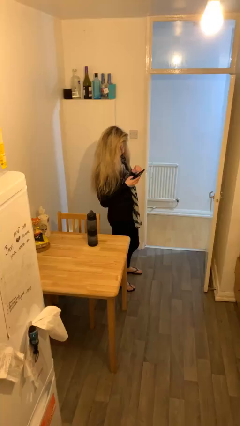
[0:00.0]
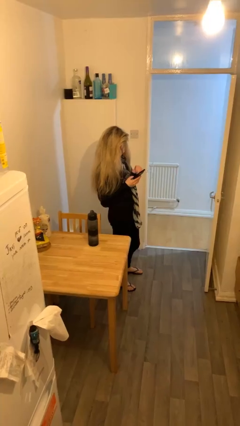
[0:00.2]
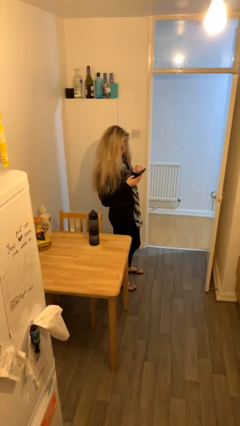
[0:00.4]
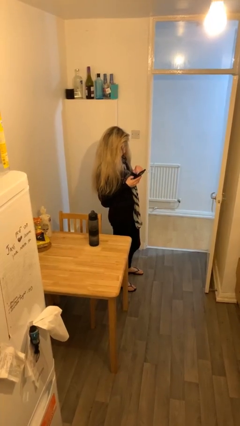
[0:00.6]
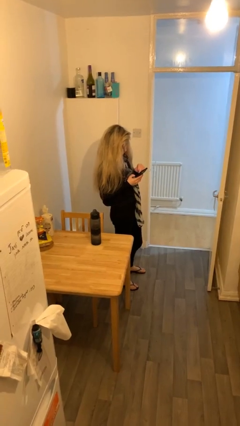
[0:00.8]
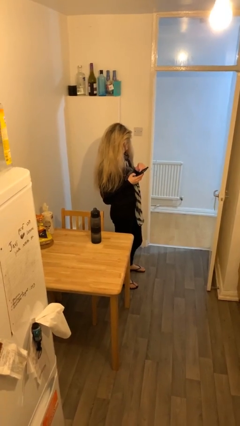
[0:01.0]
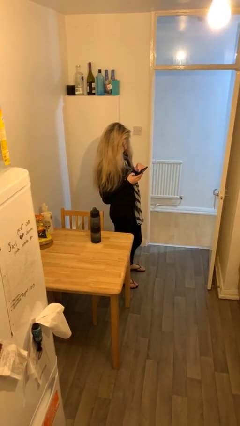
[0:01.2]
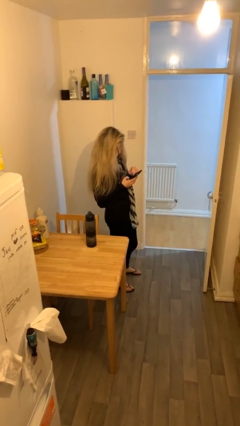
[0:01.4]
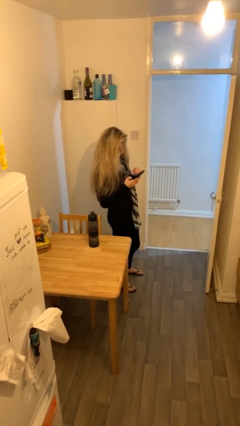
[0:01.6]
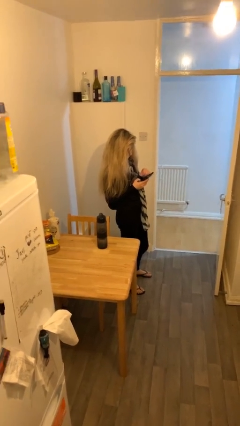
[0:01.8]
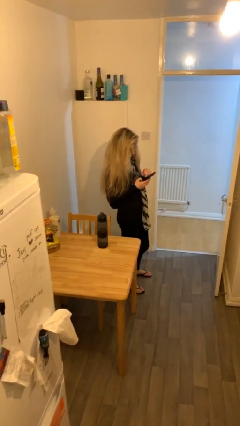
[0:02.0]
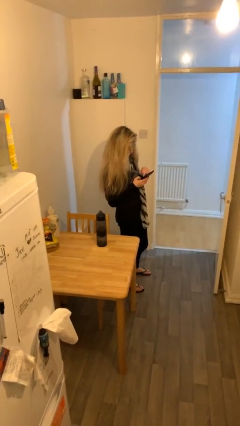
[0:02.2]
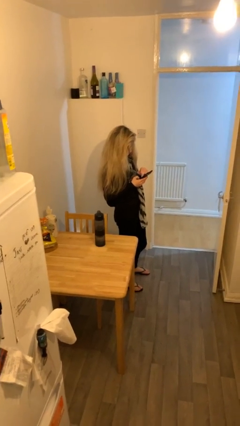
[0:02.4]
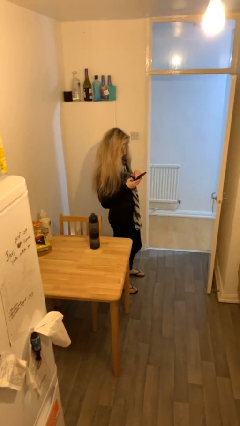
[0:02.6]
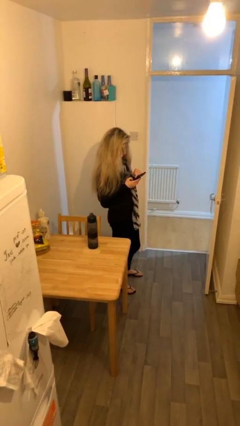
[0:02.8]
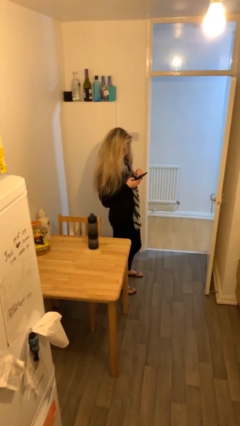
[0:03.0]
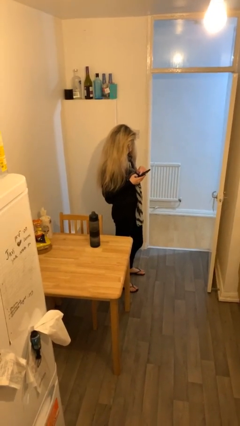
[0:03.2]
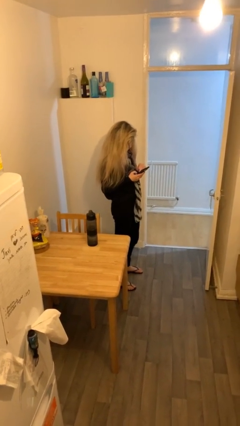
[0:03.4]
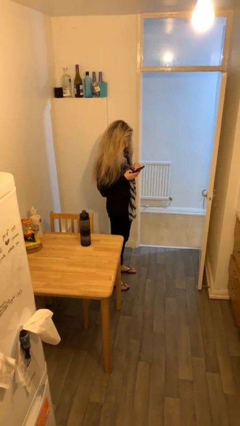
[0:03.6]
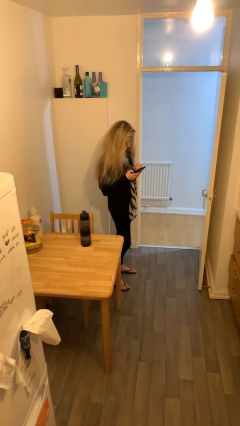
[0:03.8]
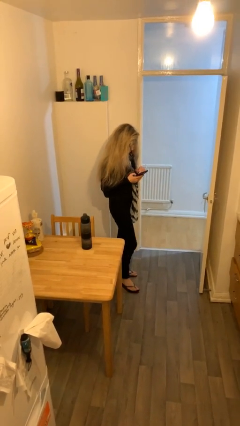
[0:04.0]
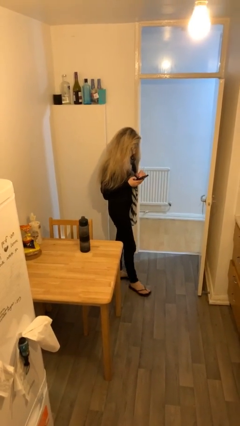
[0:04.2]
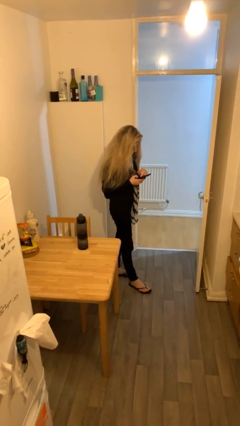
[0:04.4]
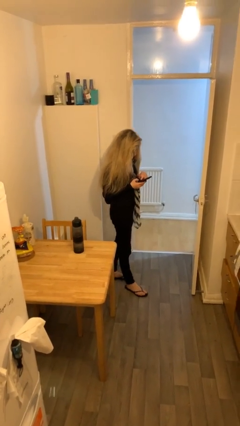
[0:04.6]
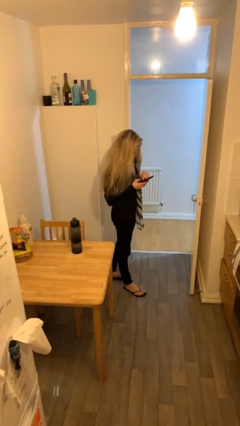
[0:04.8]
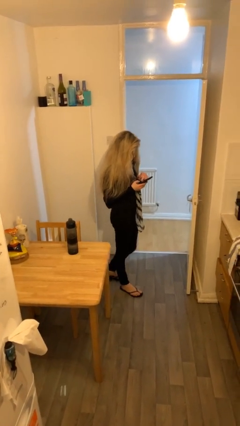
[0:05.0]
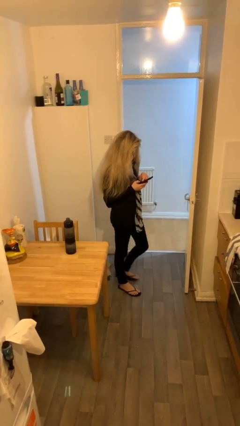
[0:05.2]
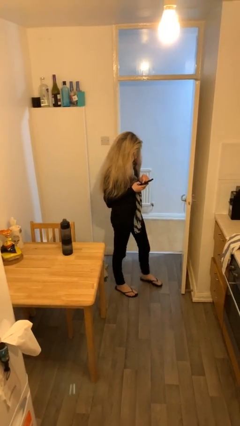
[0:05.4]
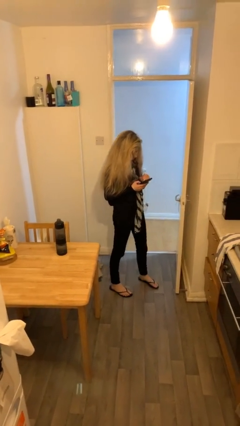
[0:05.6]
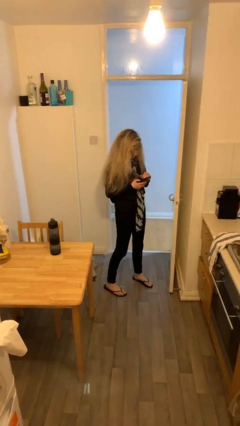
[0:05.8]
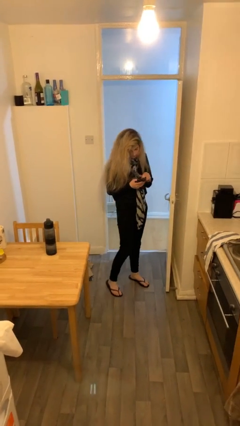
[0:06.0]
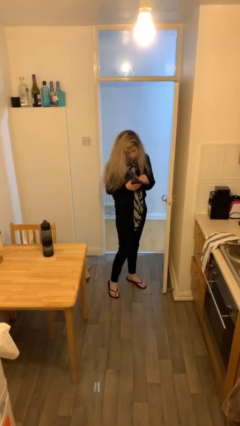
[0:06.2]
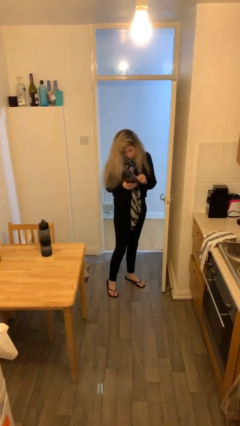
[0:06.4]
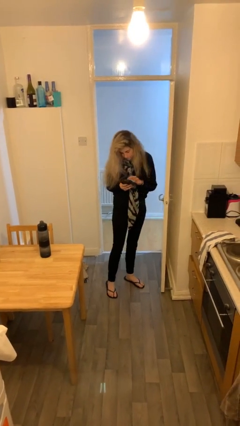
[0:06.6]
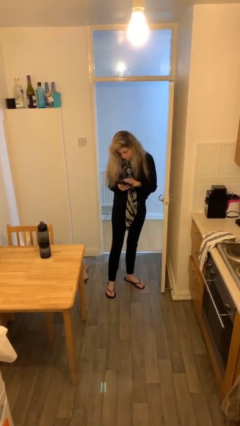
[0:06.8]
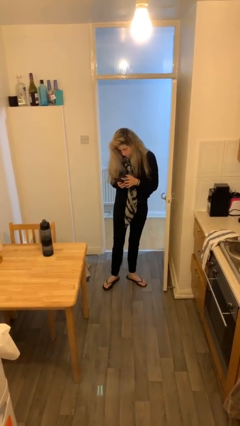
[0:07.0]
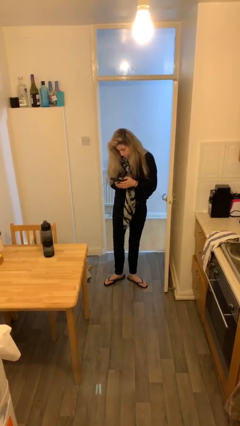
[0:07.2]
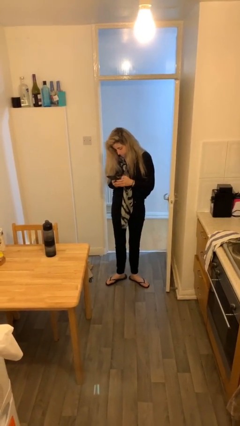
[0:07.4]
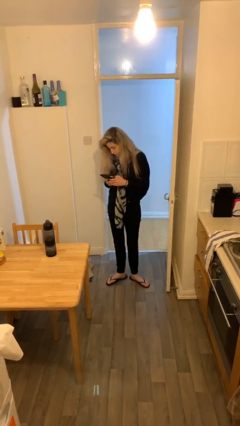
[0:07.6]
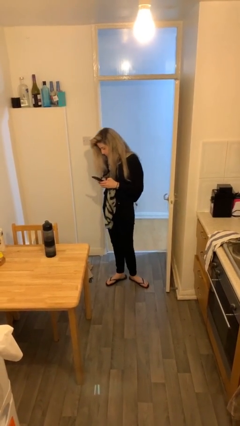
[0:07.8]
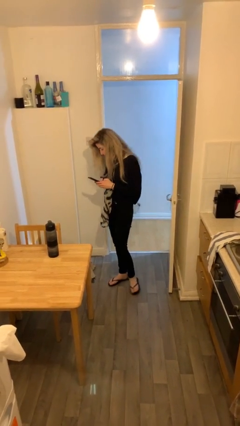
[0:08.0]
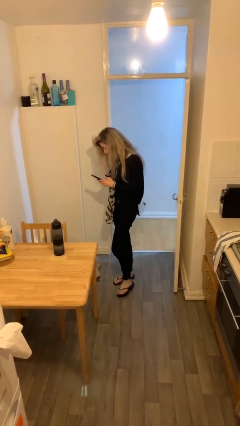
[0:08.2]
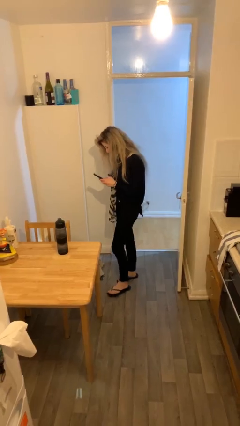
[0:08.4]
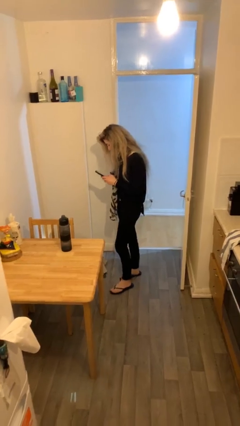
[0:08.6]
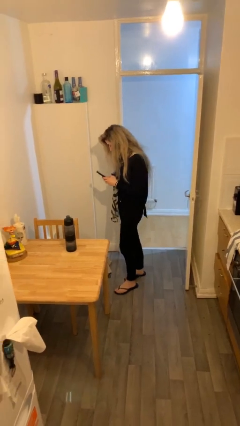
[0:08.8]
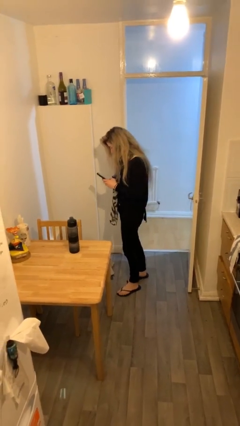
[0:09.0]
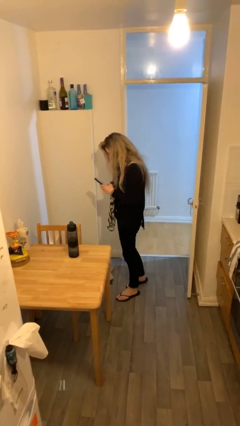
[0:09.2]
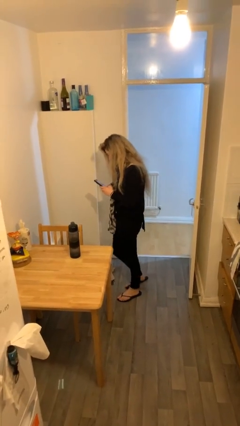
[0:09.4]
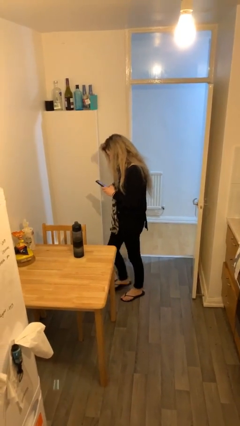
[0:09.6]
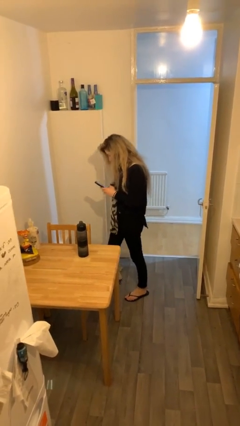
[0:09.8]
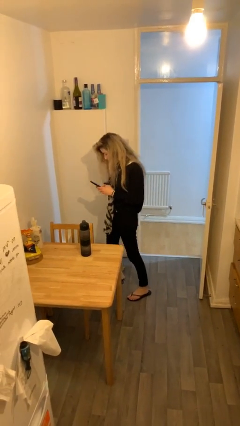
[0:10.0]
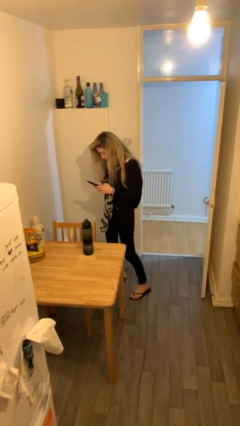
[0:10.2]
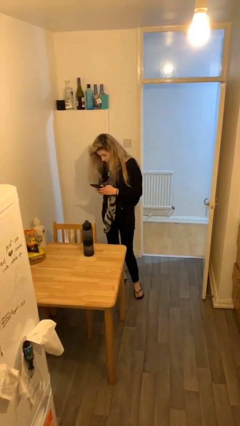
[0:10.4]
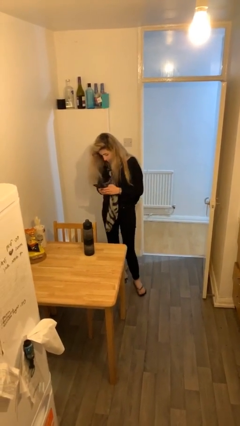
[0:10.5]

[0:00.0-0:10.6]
person texts on phone

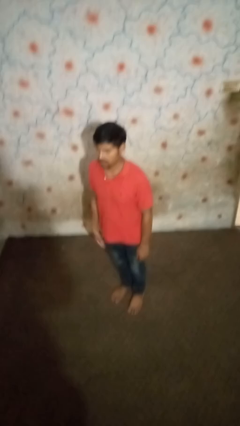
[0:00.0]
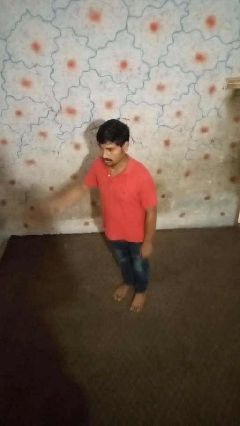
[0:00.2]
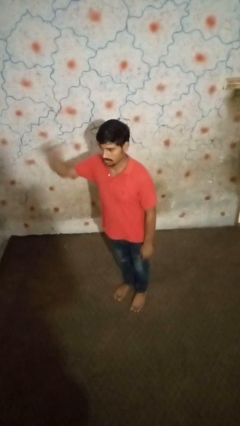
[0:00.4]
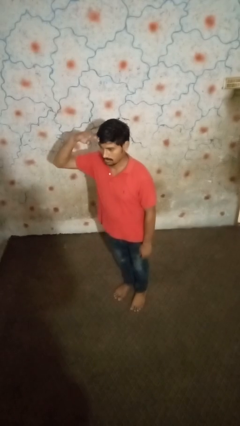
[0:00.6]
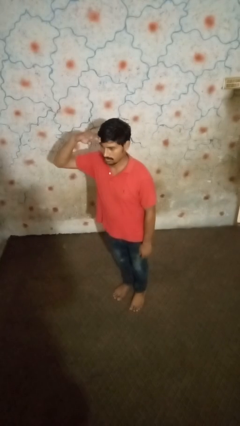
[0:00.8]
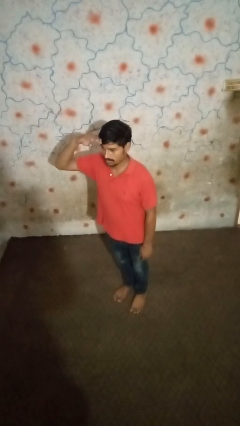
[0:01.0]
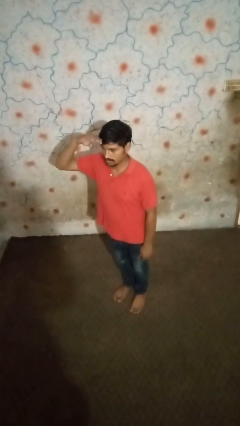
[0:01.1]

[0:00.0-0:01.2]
person salutes

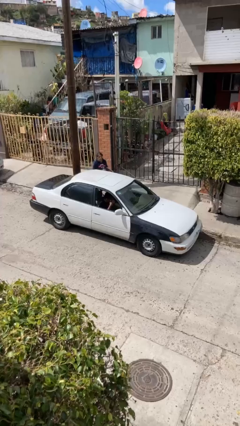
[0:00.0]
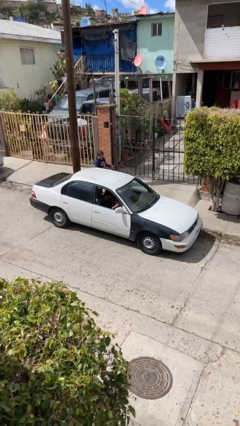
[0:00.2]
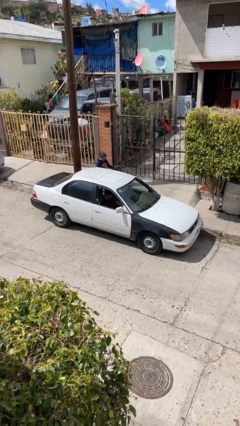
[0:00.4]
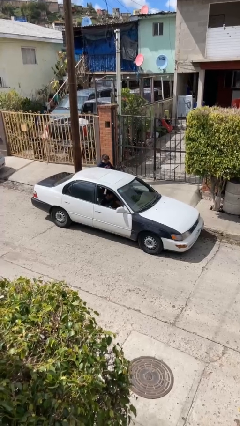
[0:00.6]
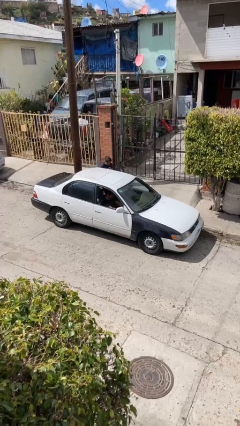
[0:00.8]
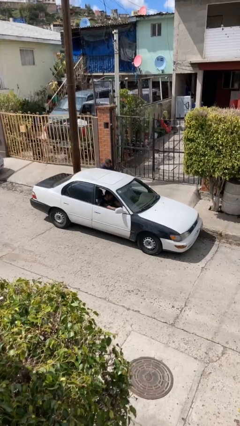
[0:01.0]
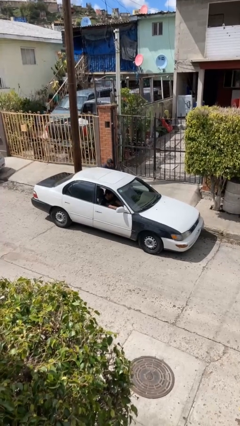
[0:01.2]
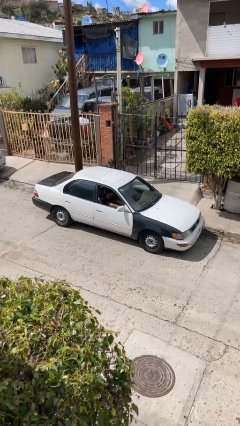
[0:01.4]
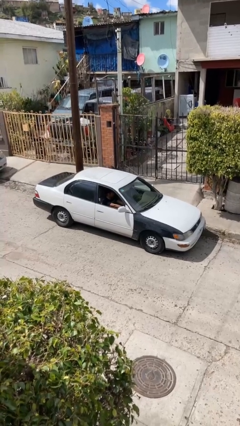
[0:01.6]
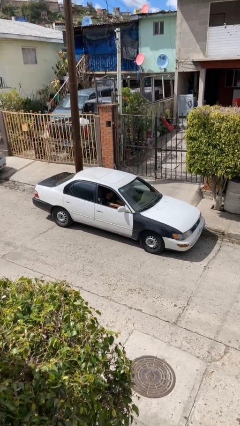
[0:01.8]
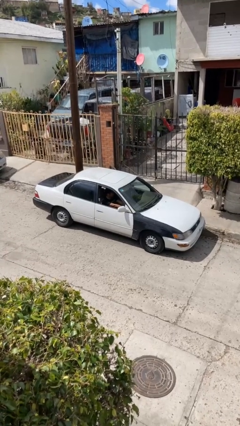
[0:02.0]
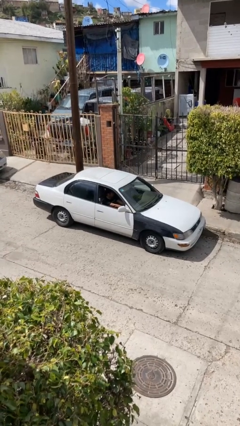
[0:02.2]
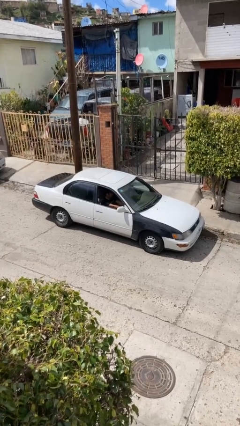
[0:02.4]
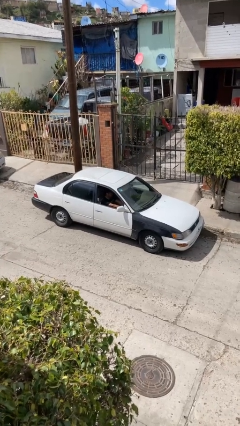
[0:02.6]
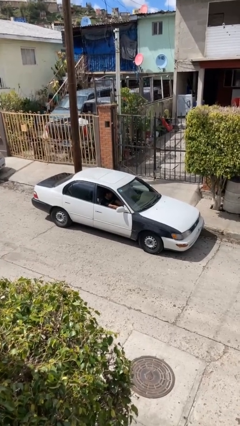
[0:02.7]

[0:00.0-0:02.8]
car picks up person

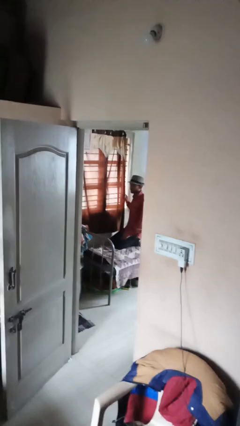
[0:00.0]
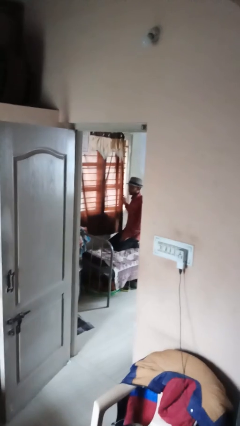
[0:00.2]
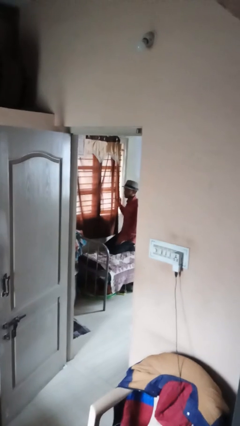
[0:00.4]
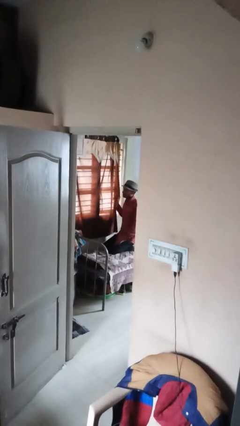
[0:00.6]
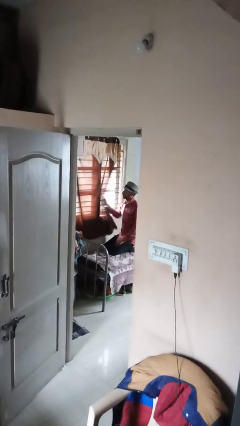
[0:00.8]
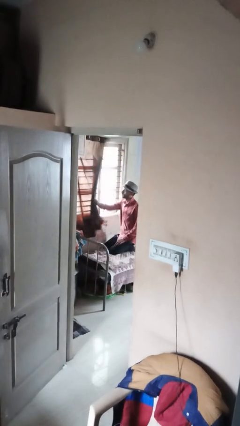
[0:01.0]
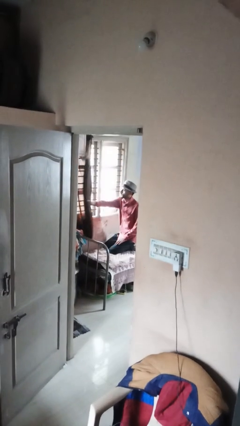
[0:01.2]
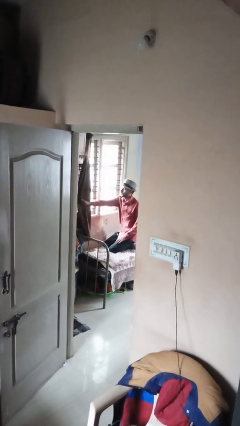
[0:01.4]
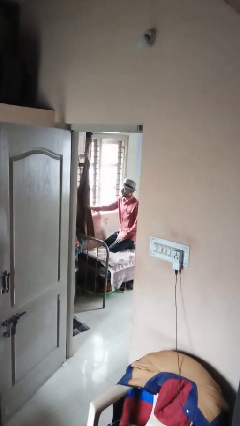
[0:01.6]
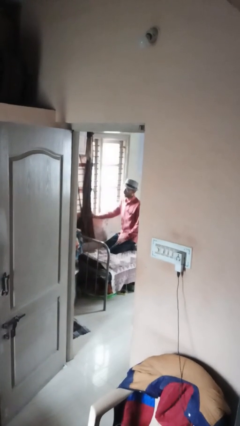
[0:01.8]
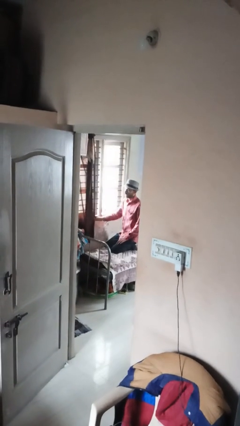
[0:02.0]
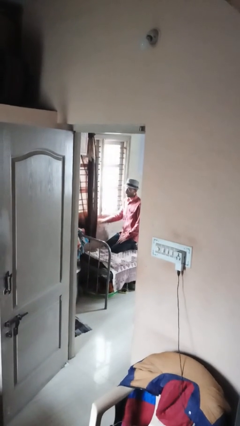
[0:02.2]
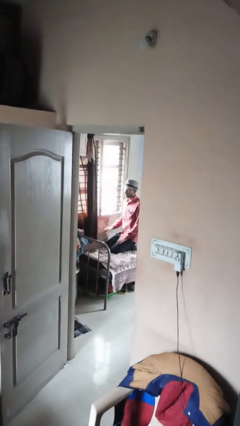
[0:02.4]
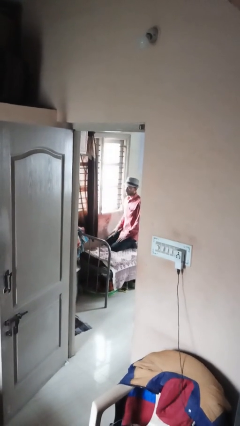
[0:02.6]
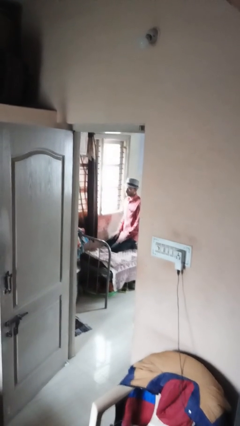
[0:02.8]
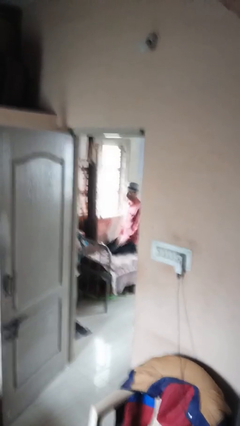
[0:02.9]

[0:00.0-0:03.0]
person opens curtains

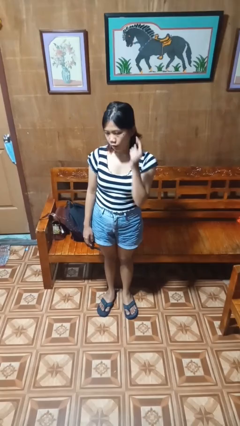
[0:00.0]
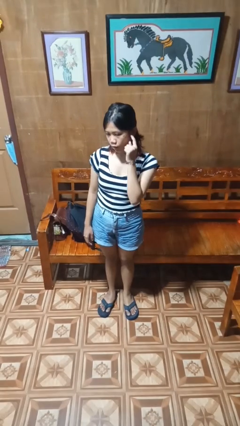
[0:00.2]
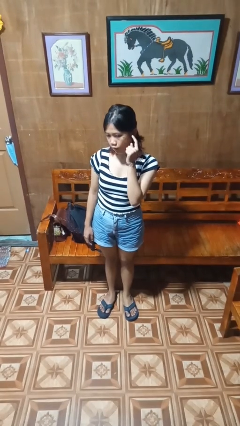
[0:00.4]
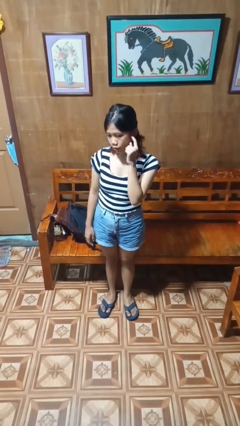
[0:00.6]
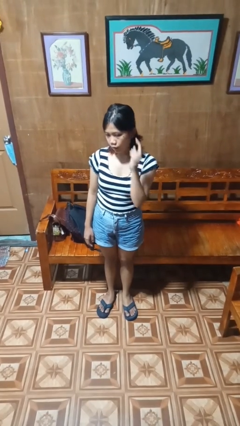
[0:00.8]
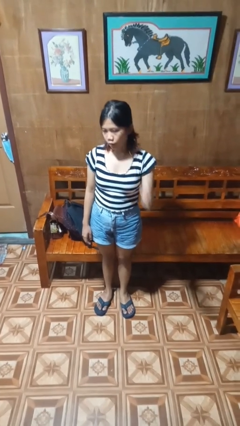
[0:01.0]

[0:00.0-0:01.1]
person gestures listen closely
